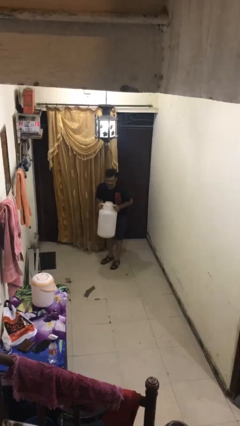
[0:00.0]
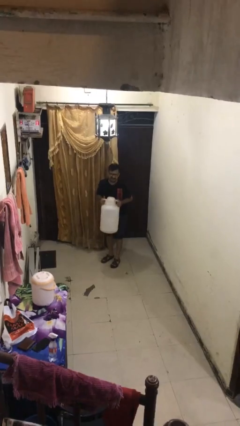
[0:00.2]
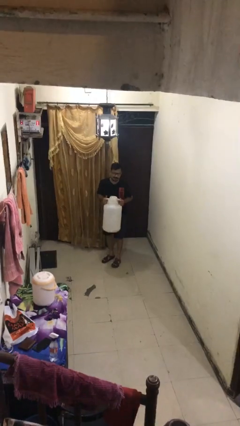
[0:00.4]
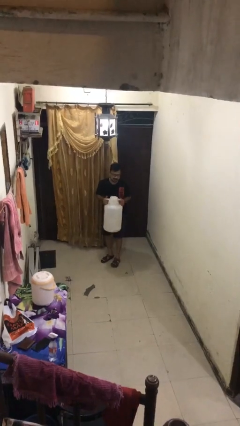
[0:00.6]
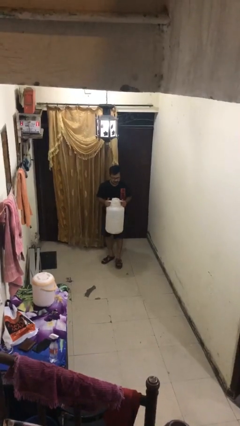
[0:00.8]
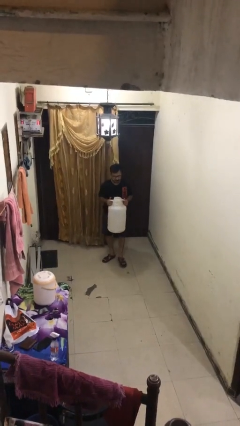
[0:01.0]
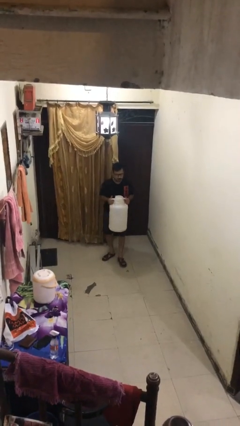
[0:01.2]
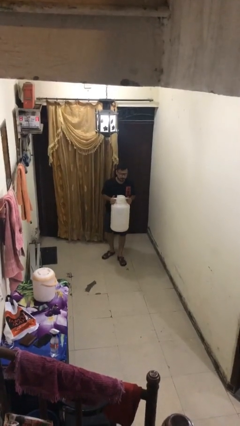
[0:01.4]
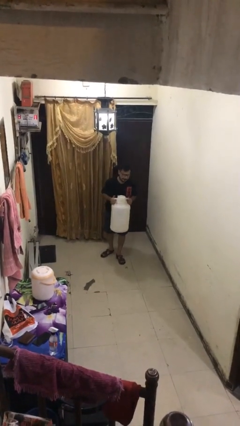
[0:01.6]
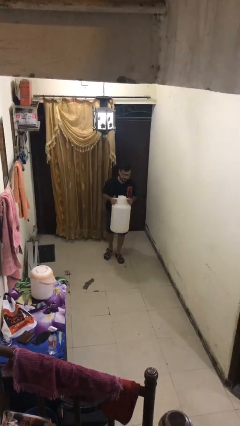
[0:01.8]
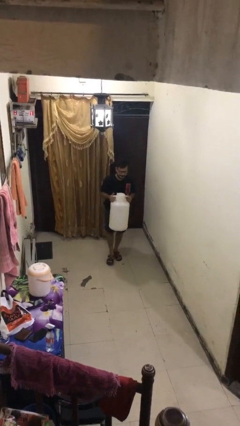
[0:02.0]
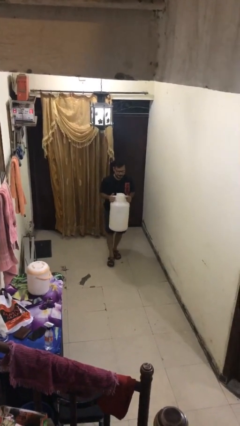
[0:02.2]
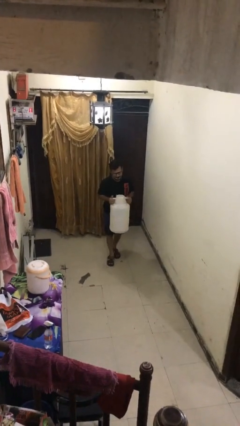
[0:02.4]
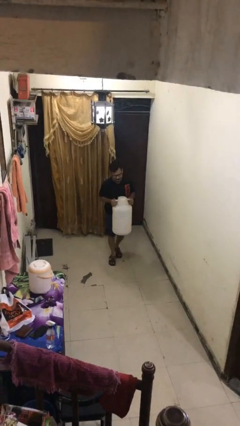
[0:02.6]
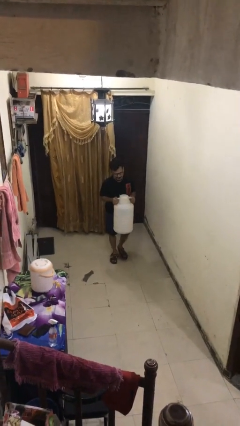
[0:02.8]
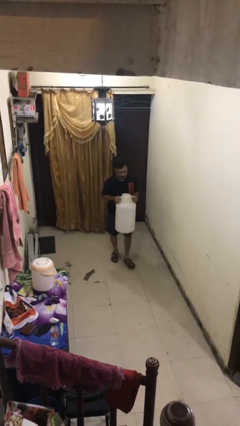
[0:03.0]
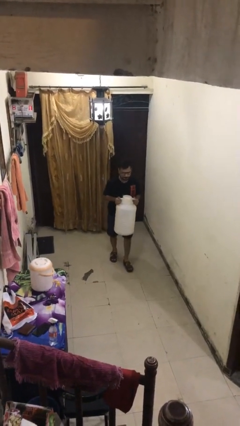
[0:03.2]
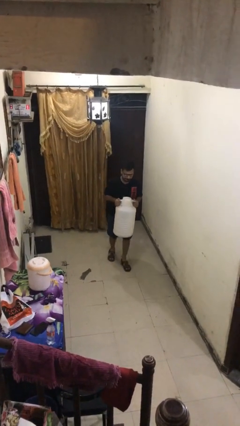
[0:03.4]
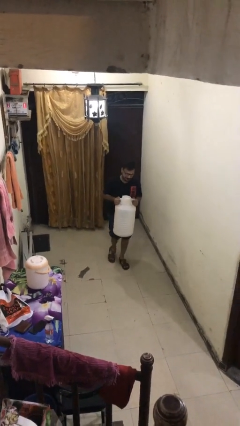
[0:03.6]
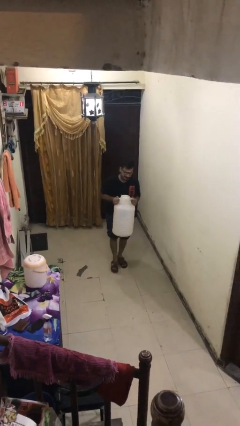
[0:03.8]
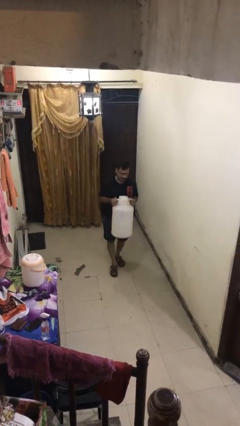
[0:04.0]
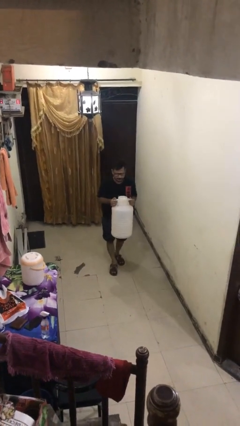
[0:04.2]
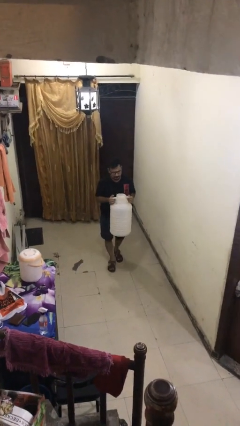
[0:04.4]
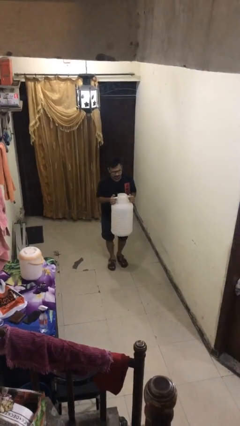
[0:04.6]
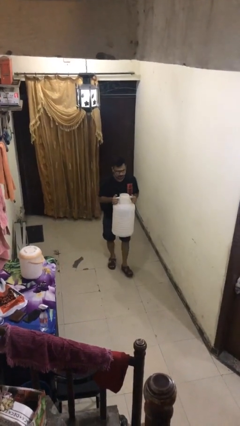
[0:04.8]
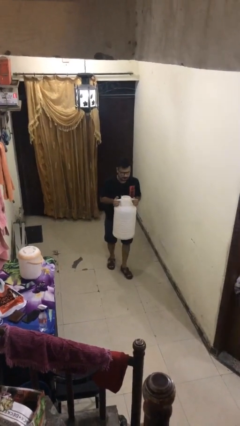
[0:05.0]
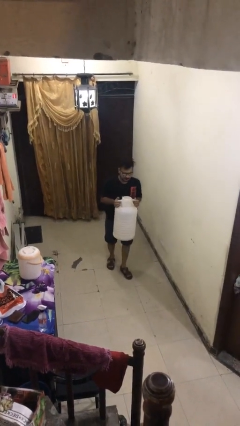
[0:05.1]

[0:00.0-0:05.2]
person carries heavy object

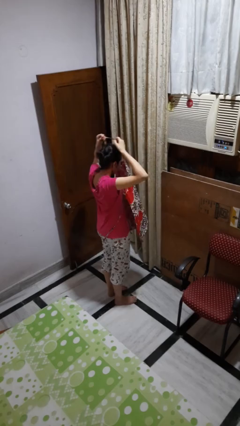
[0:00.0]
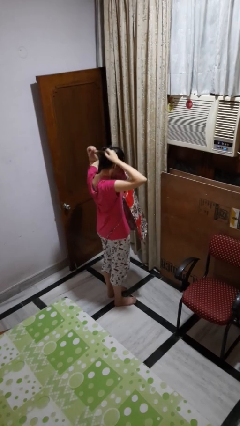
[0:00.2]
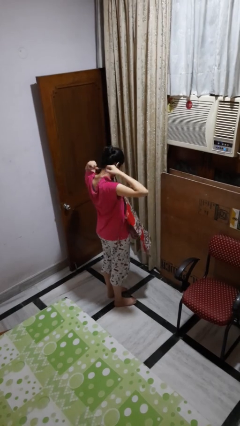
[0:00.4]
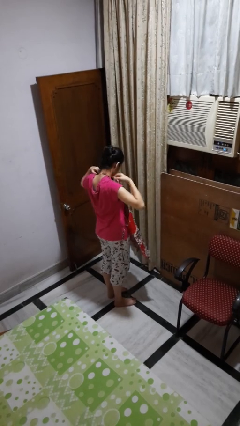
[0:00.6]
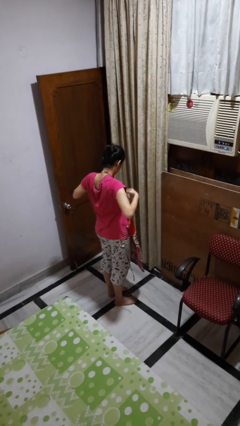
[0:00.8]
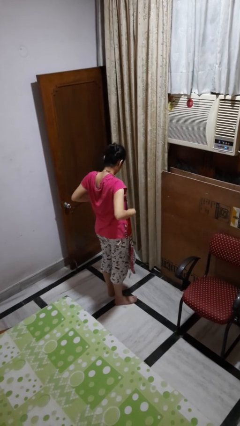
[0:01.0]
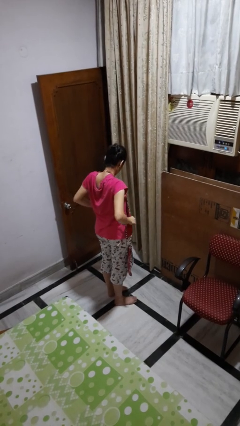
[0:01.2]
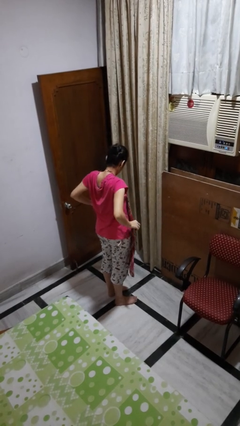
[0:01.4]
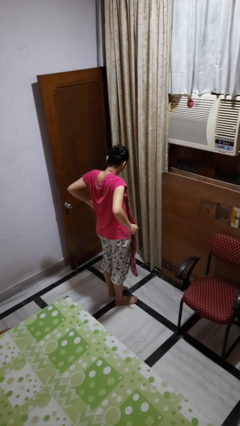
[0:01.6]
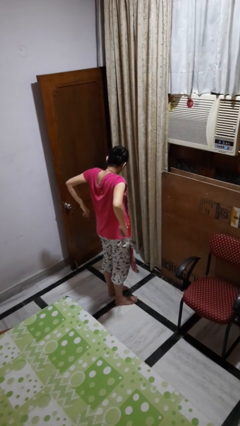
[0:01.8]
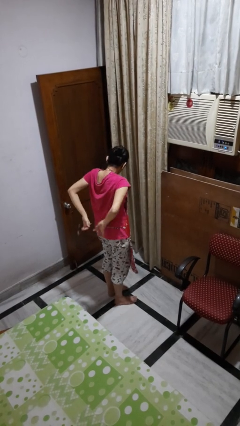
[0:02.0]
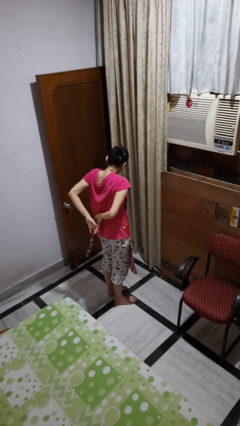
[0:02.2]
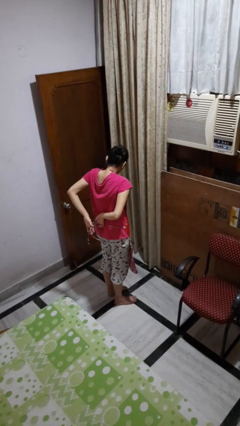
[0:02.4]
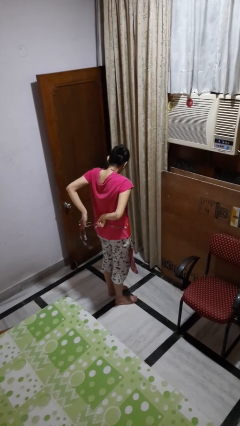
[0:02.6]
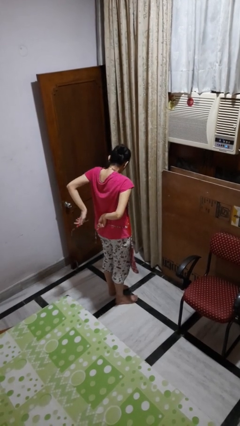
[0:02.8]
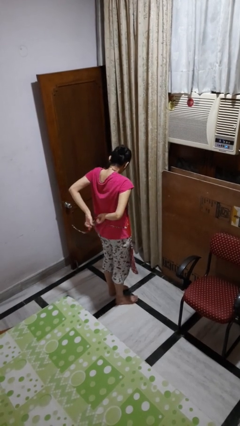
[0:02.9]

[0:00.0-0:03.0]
person puts on apron

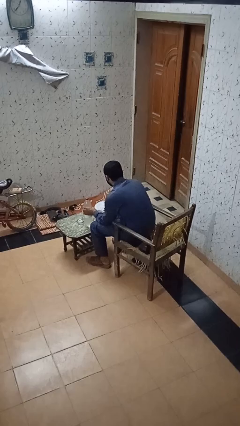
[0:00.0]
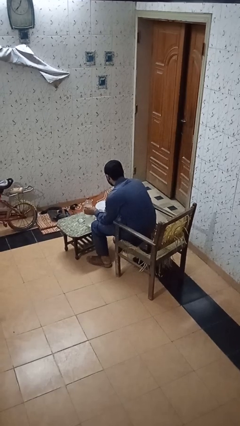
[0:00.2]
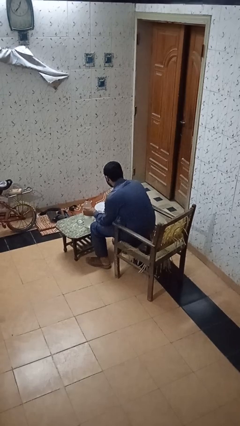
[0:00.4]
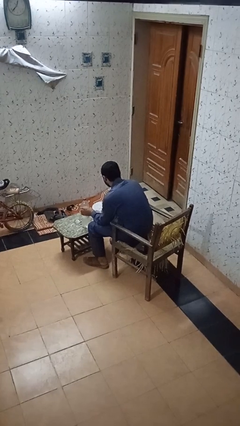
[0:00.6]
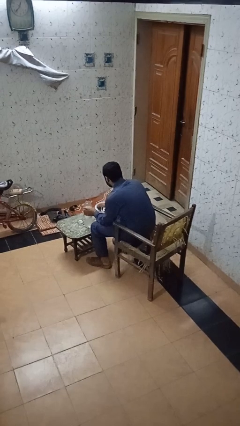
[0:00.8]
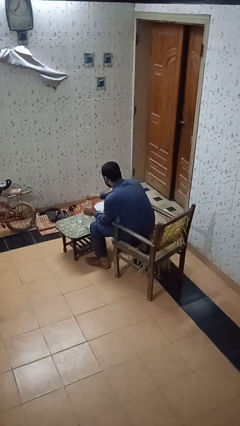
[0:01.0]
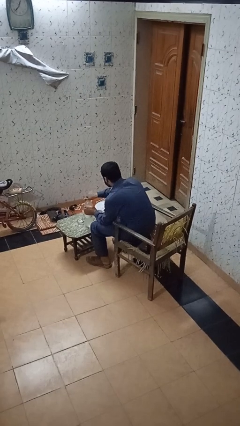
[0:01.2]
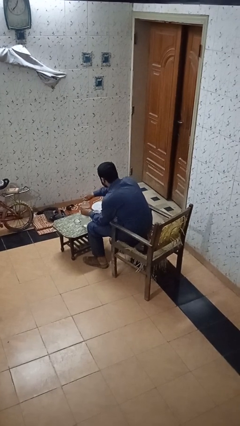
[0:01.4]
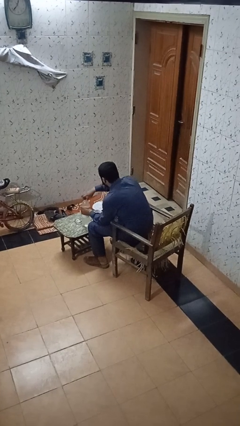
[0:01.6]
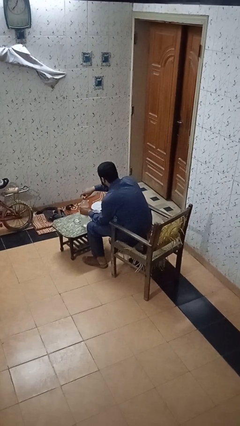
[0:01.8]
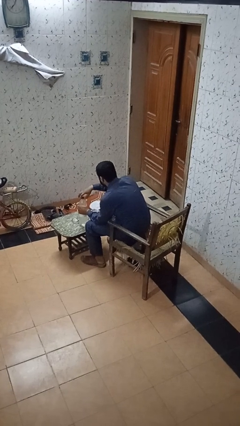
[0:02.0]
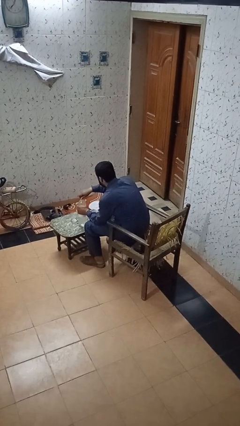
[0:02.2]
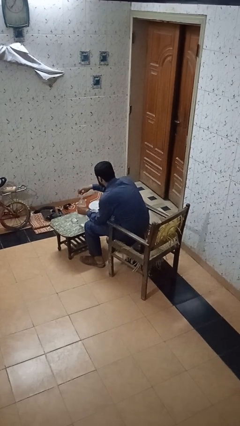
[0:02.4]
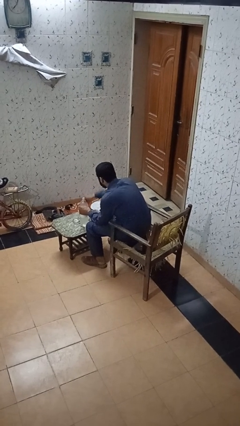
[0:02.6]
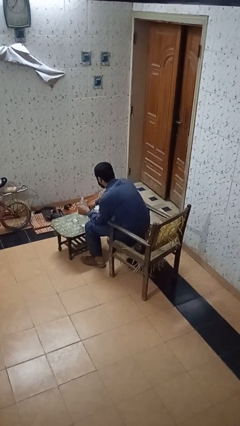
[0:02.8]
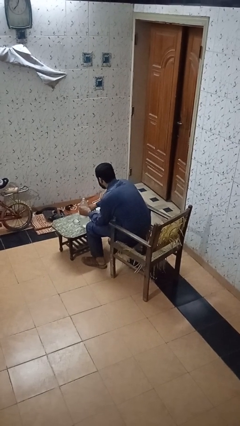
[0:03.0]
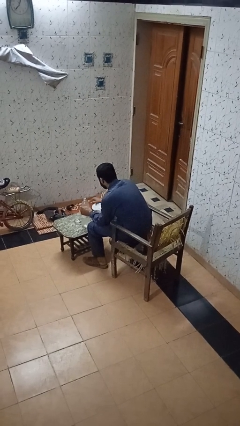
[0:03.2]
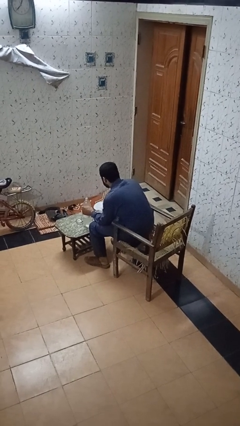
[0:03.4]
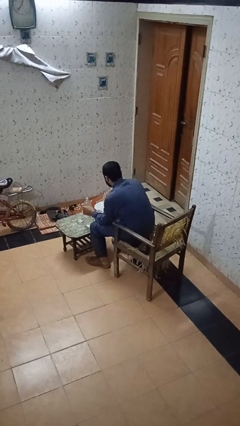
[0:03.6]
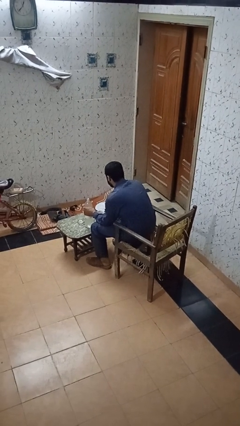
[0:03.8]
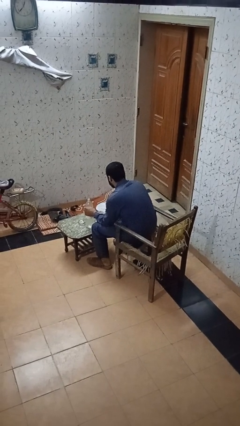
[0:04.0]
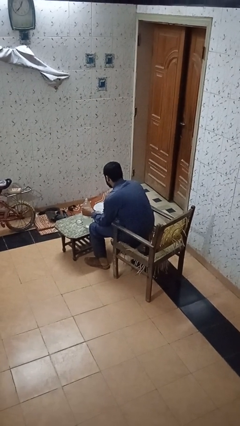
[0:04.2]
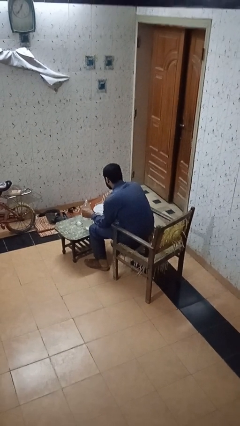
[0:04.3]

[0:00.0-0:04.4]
person unscrews lid from bottle

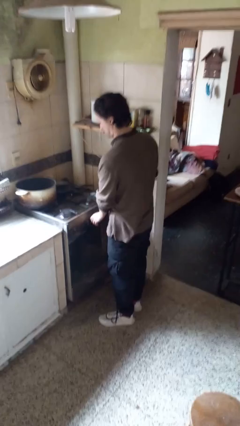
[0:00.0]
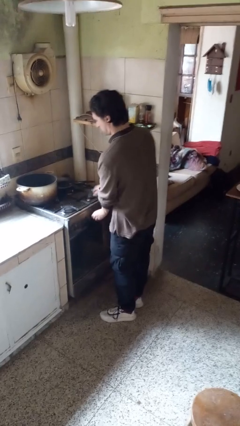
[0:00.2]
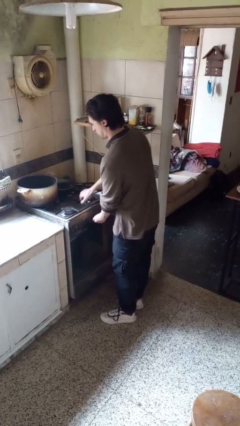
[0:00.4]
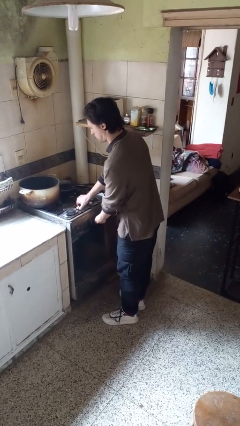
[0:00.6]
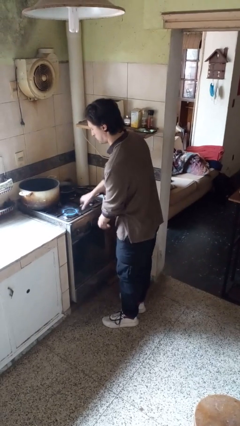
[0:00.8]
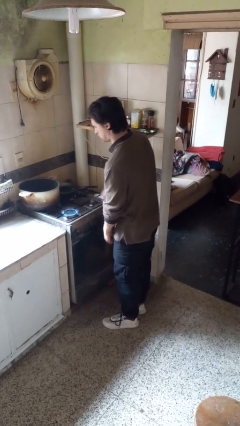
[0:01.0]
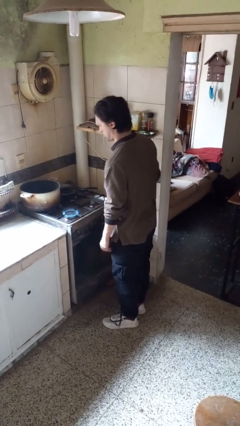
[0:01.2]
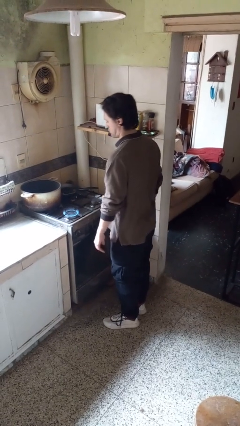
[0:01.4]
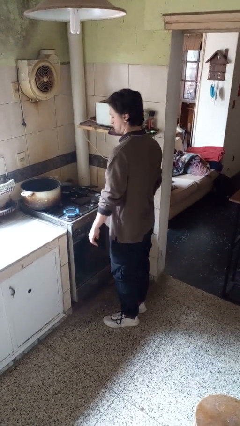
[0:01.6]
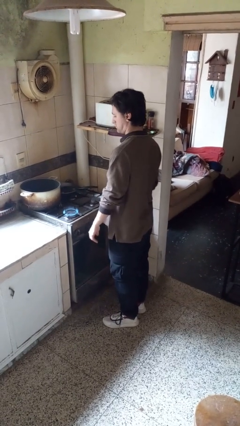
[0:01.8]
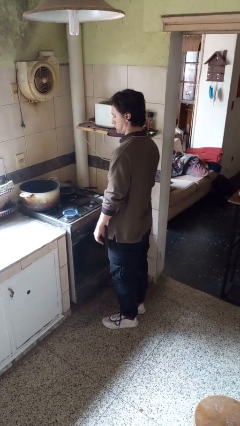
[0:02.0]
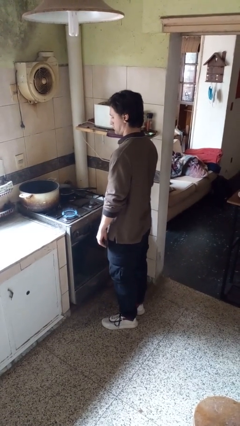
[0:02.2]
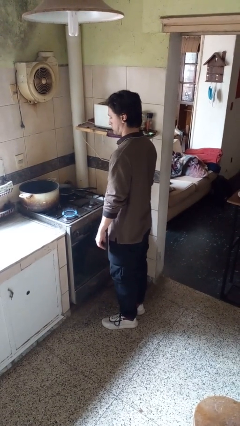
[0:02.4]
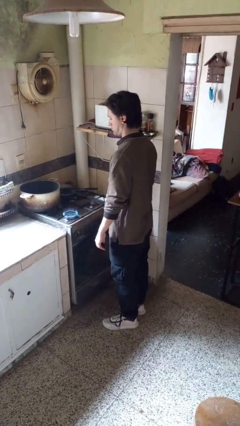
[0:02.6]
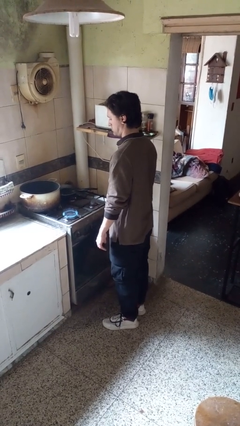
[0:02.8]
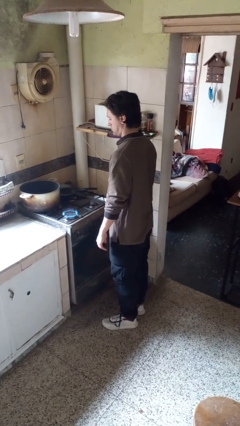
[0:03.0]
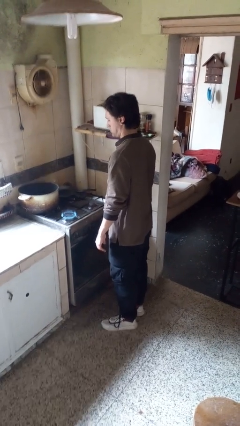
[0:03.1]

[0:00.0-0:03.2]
person turns on stovetop

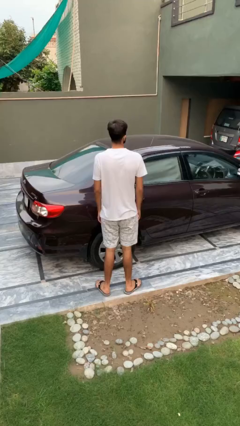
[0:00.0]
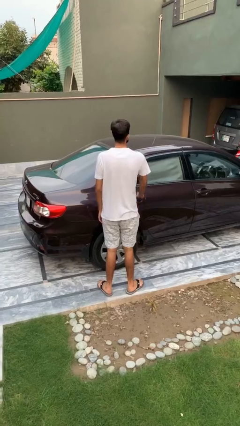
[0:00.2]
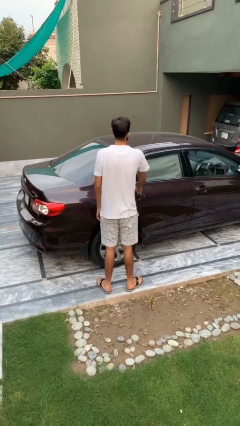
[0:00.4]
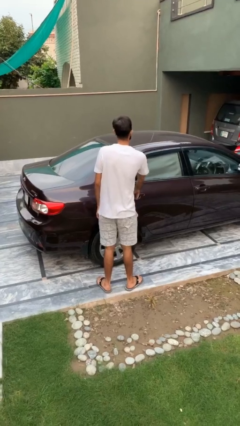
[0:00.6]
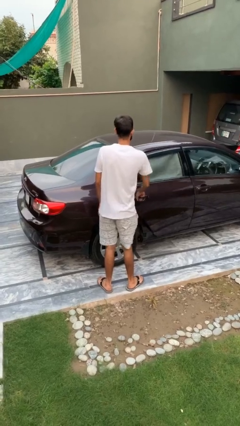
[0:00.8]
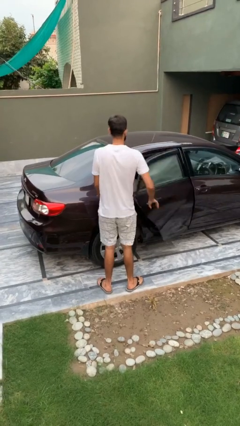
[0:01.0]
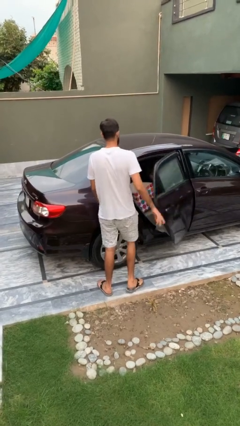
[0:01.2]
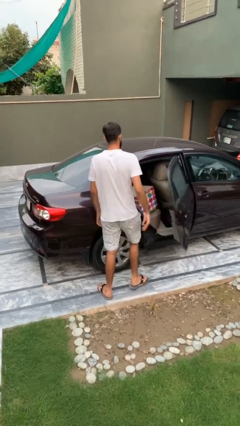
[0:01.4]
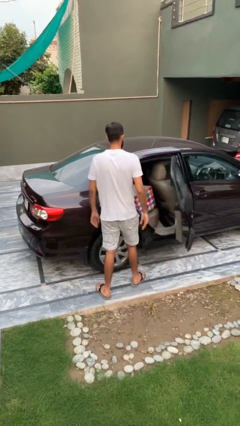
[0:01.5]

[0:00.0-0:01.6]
person opens car door

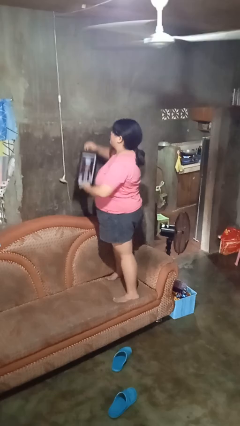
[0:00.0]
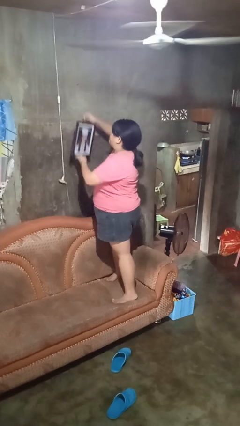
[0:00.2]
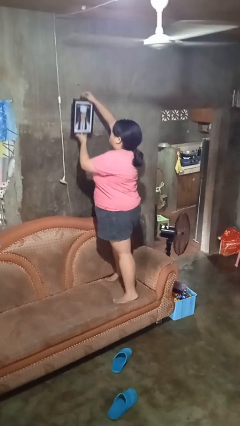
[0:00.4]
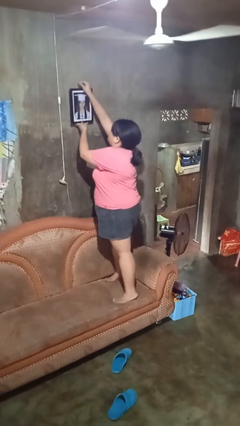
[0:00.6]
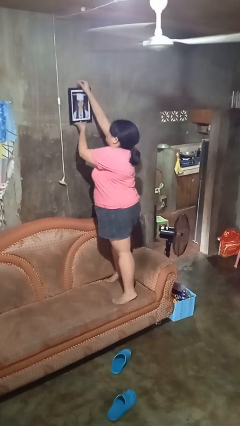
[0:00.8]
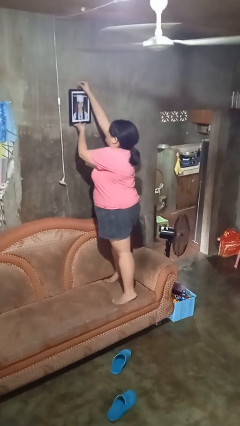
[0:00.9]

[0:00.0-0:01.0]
person puts up picture frame
